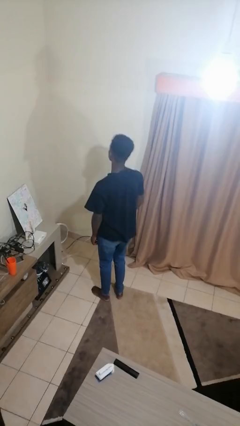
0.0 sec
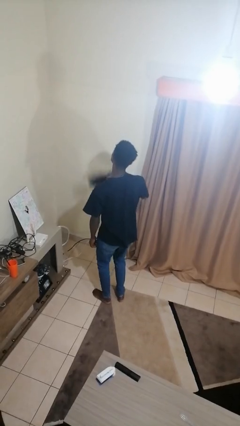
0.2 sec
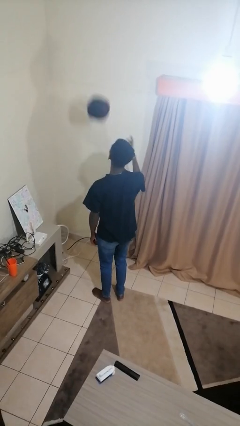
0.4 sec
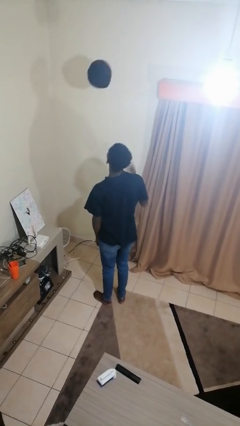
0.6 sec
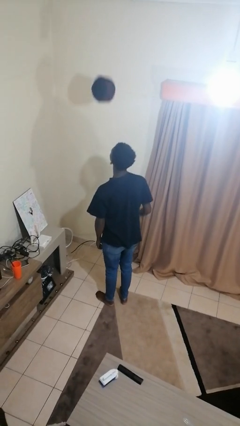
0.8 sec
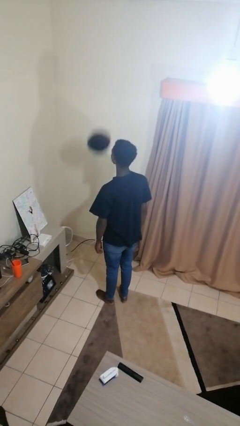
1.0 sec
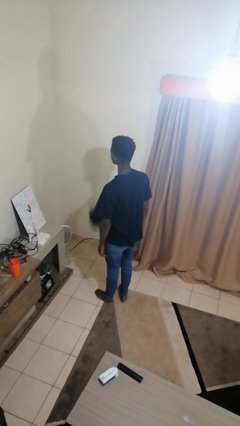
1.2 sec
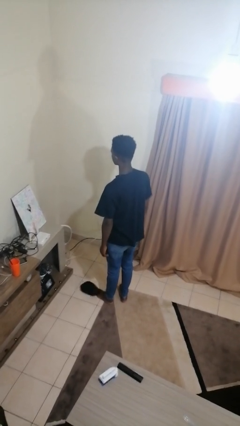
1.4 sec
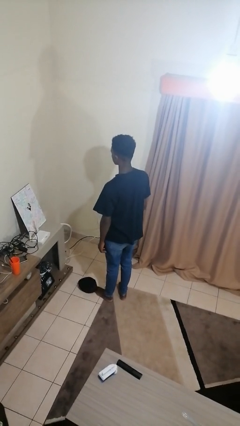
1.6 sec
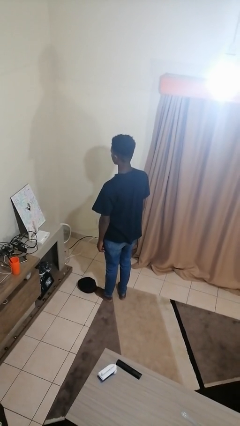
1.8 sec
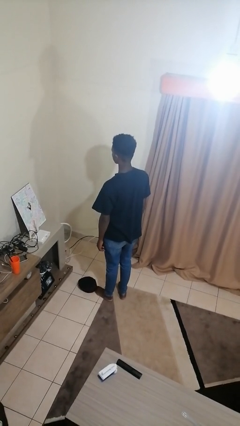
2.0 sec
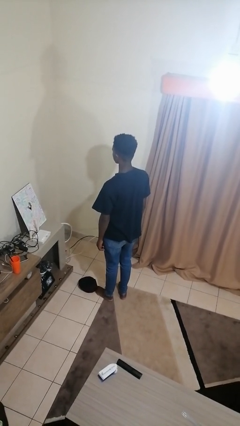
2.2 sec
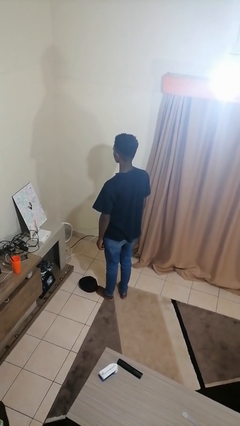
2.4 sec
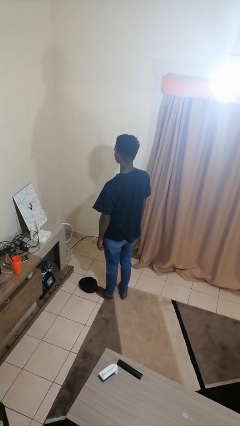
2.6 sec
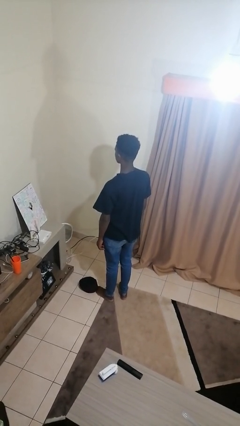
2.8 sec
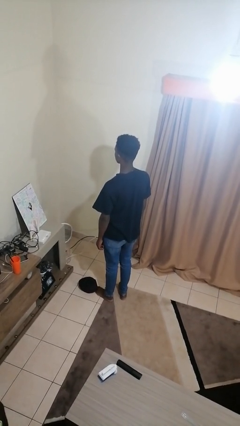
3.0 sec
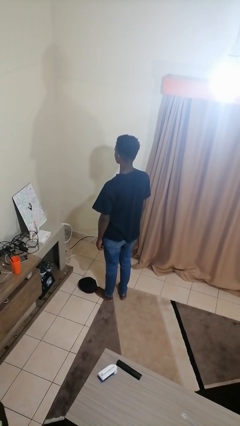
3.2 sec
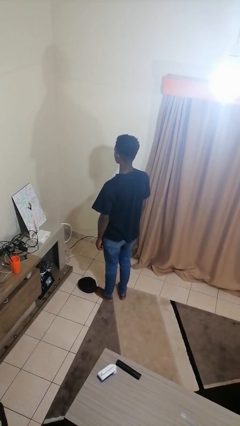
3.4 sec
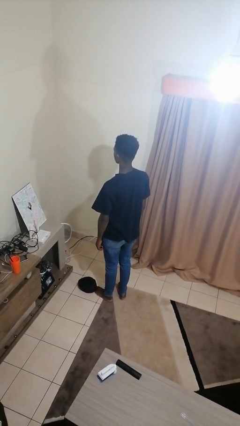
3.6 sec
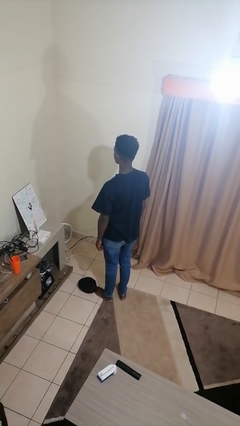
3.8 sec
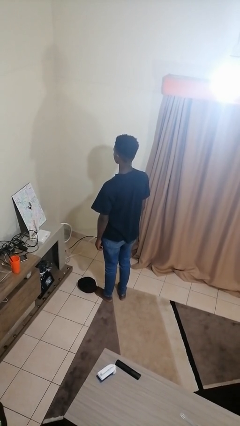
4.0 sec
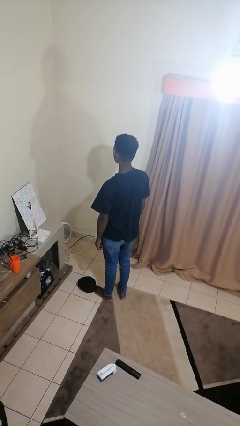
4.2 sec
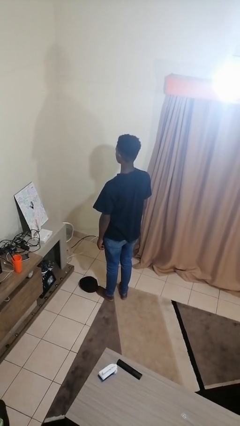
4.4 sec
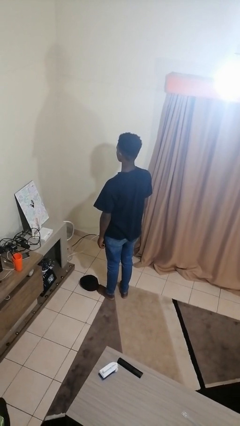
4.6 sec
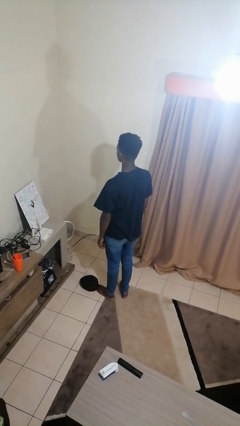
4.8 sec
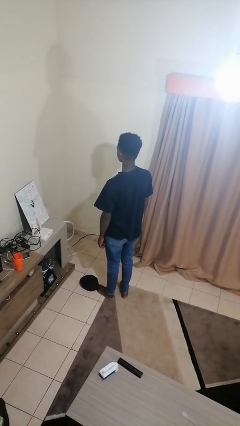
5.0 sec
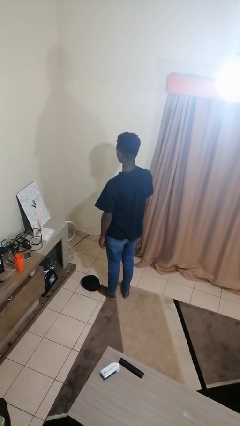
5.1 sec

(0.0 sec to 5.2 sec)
person throws object into air

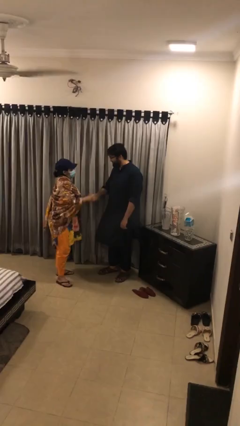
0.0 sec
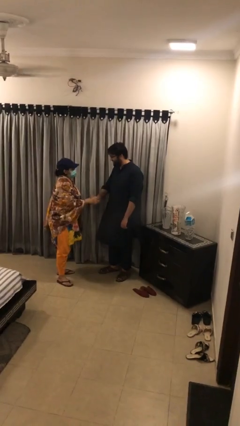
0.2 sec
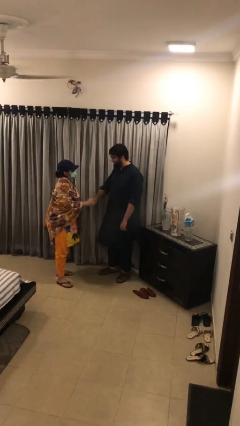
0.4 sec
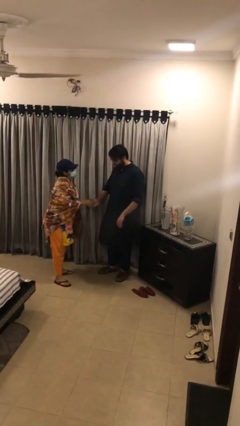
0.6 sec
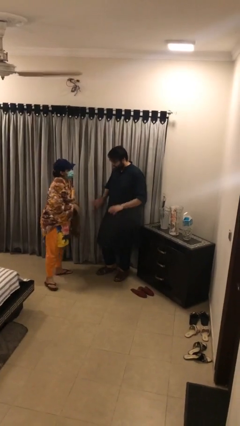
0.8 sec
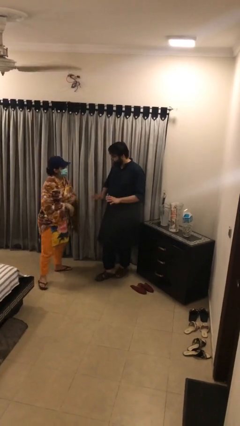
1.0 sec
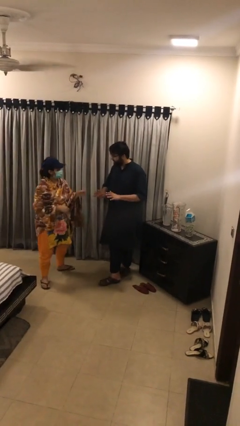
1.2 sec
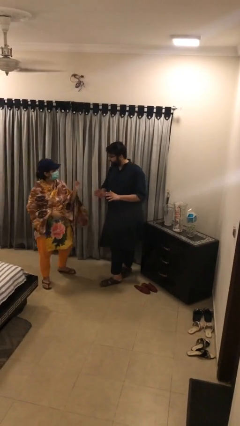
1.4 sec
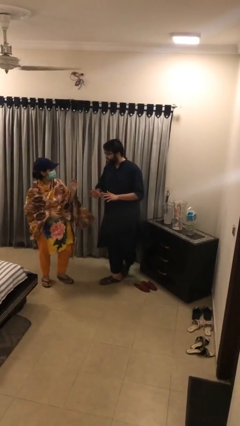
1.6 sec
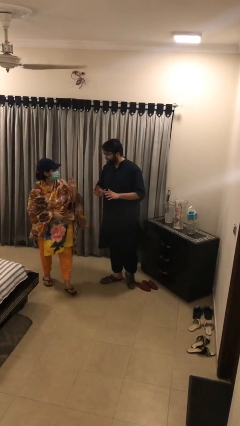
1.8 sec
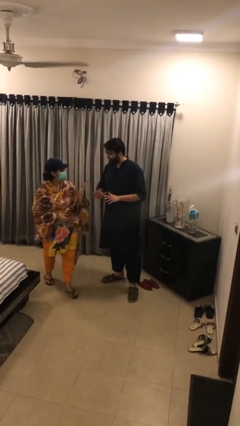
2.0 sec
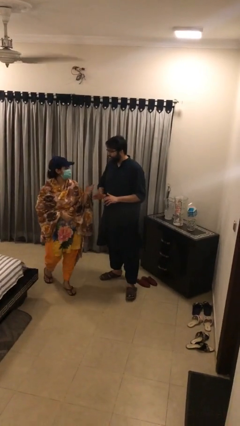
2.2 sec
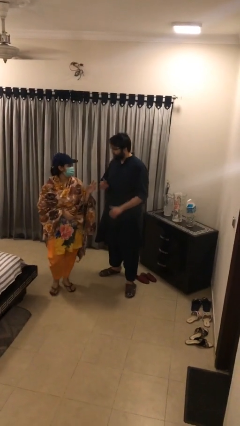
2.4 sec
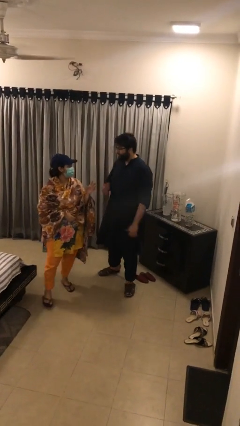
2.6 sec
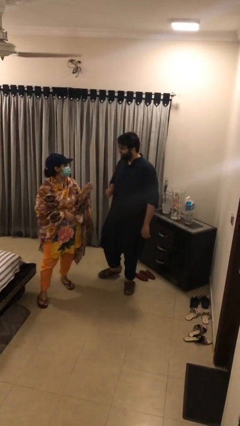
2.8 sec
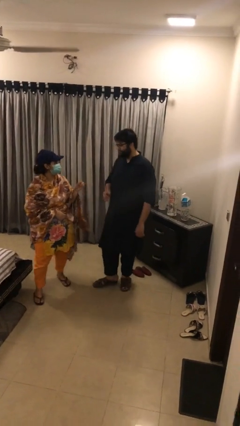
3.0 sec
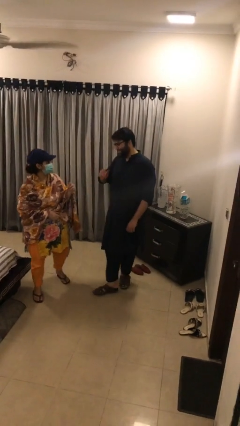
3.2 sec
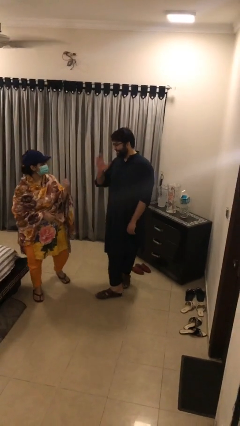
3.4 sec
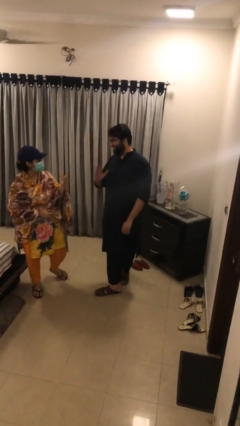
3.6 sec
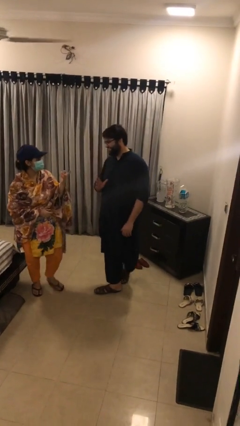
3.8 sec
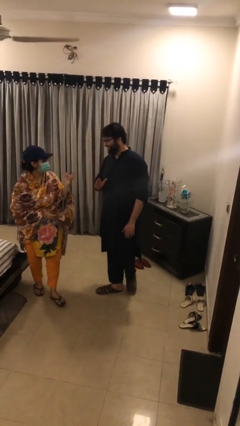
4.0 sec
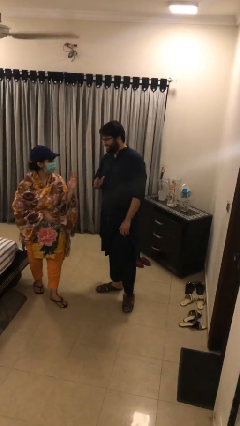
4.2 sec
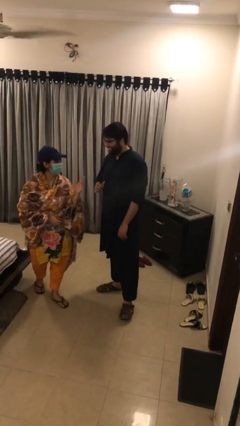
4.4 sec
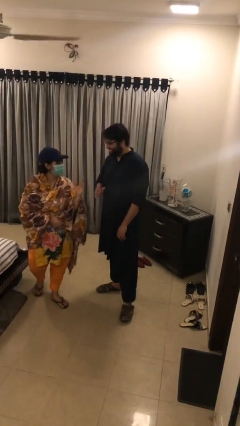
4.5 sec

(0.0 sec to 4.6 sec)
person talks to person

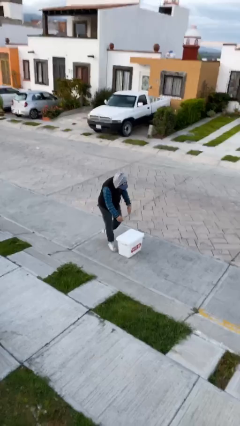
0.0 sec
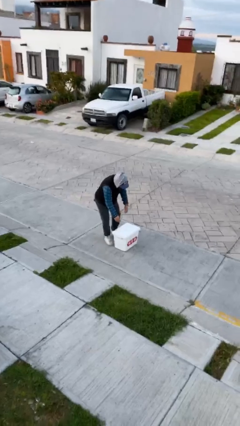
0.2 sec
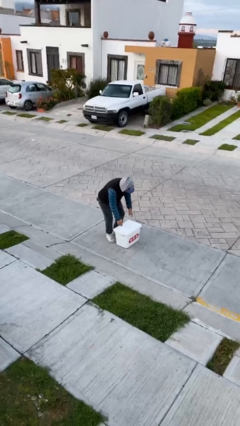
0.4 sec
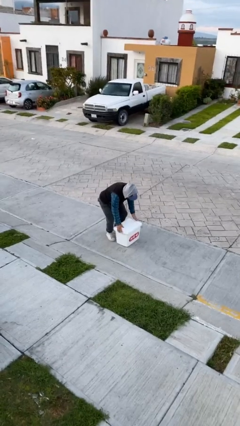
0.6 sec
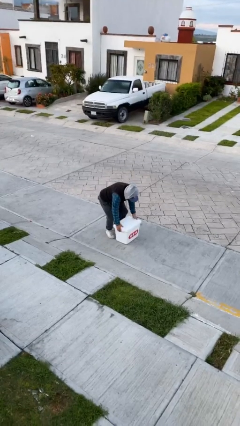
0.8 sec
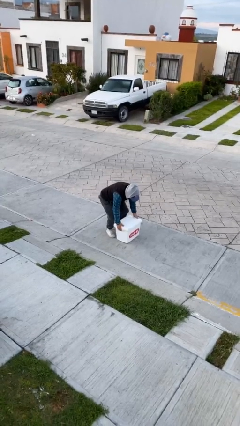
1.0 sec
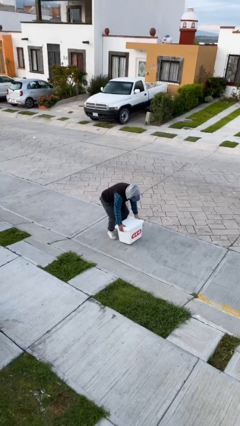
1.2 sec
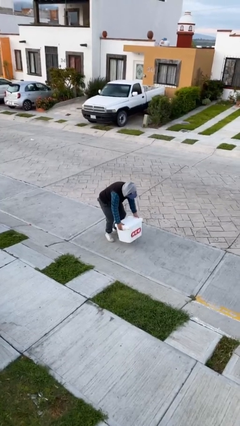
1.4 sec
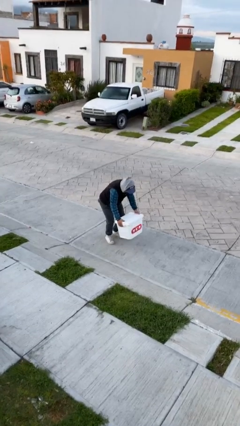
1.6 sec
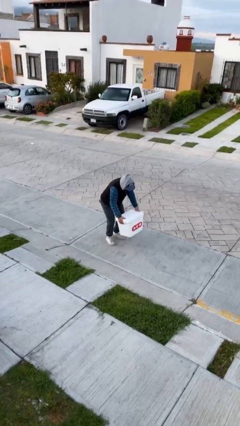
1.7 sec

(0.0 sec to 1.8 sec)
person picks up object from floor

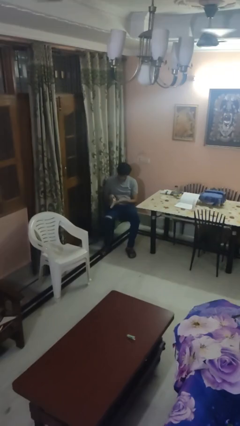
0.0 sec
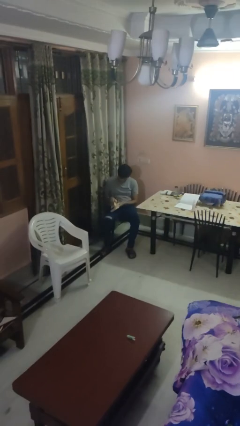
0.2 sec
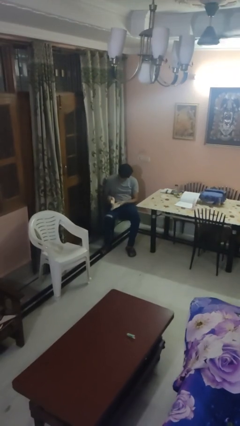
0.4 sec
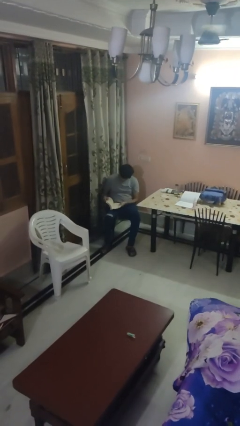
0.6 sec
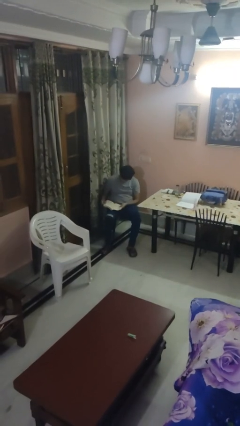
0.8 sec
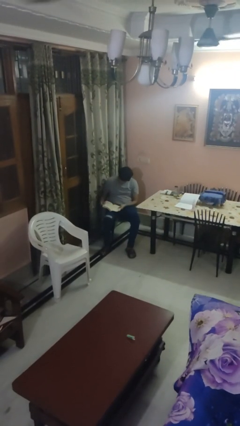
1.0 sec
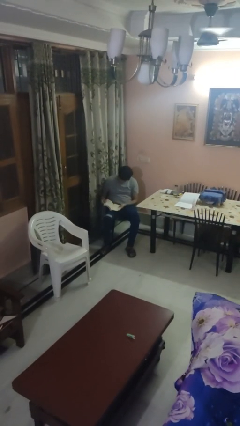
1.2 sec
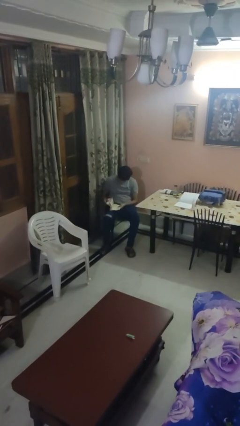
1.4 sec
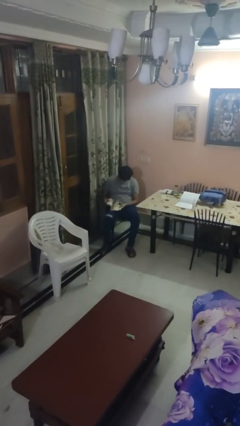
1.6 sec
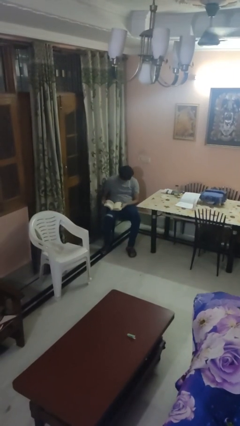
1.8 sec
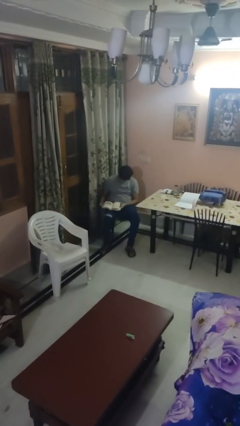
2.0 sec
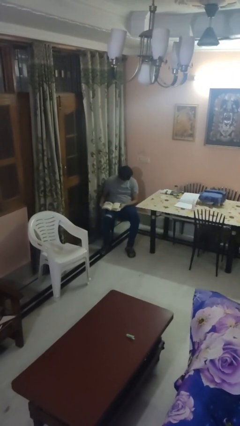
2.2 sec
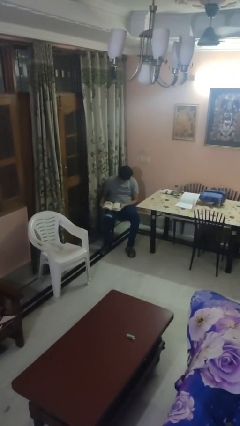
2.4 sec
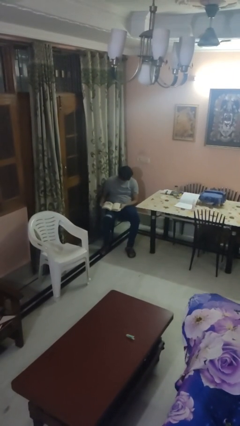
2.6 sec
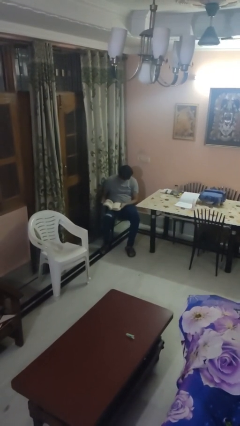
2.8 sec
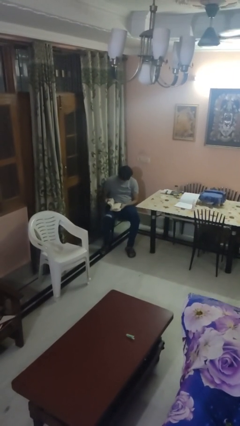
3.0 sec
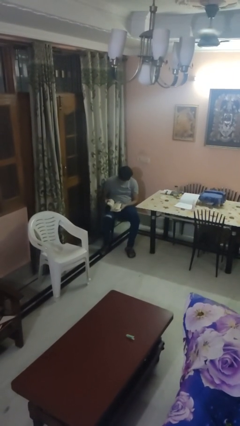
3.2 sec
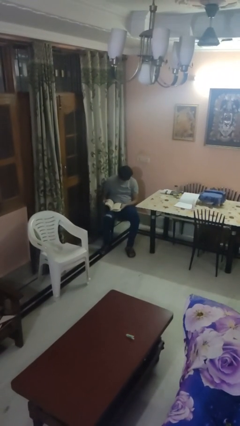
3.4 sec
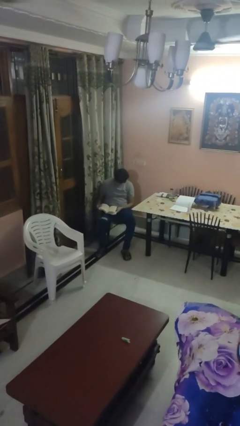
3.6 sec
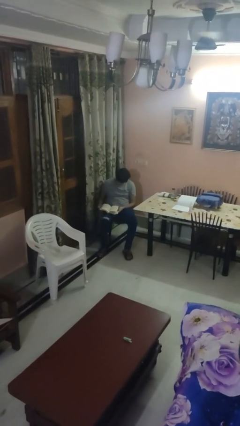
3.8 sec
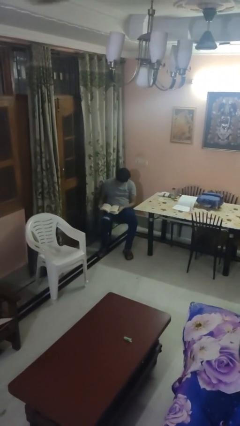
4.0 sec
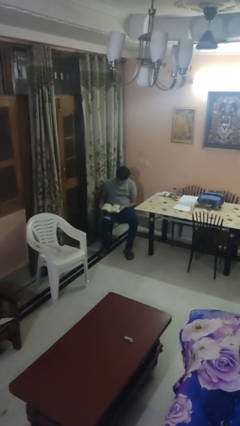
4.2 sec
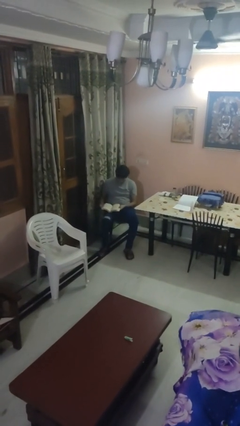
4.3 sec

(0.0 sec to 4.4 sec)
person reads book

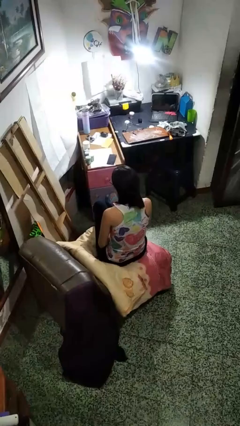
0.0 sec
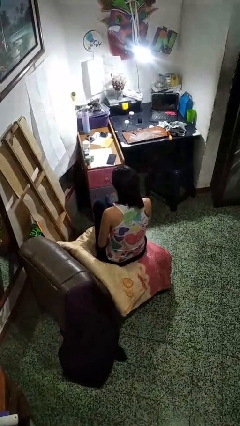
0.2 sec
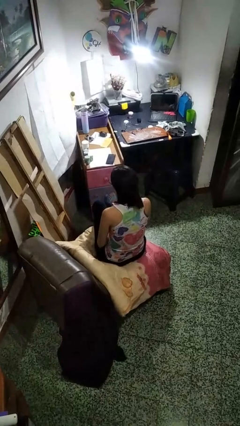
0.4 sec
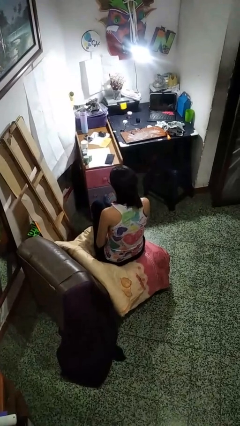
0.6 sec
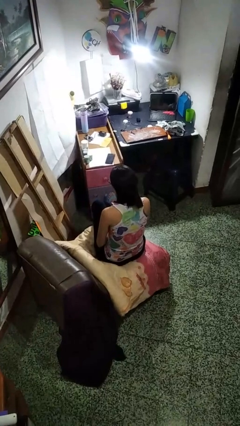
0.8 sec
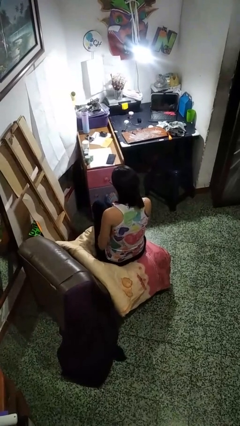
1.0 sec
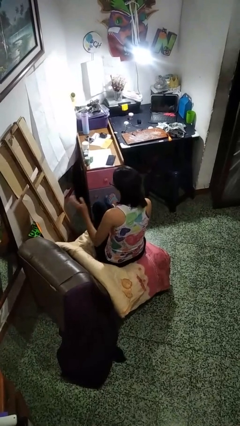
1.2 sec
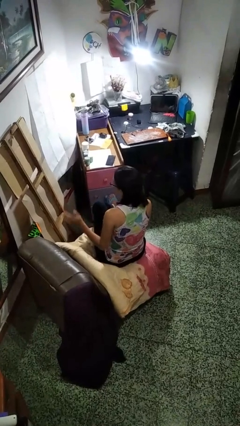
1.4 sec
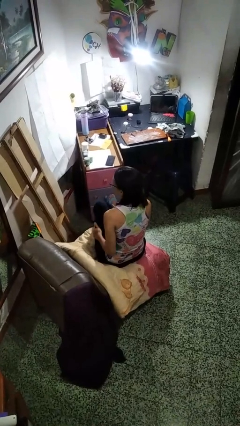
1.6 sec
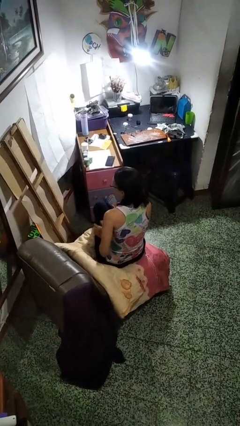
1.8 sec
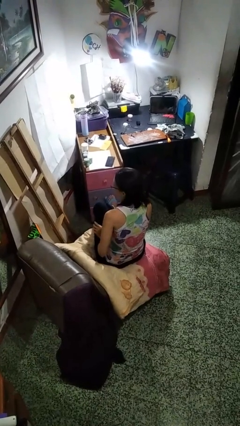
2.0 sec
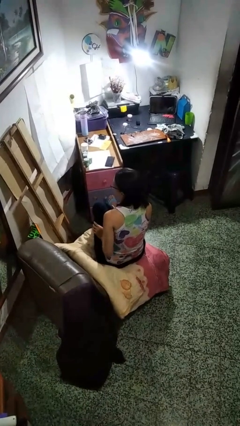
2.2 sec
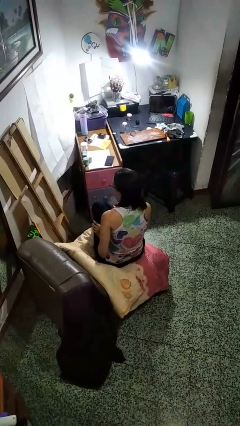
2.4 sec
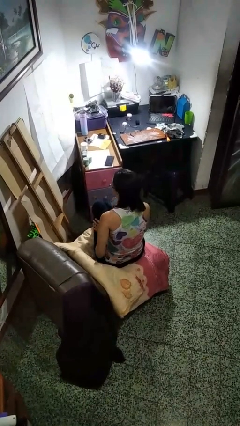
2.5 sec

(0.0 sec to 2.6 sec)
person slaps hands on thighs
